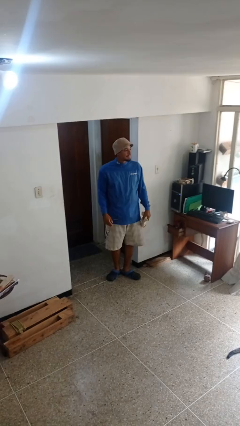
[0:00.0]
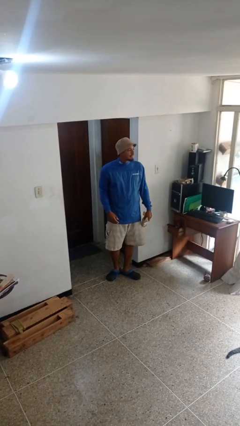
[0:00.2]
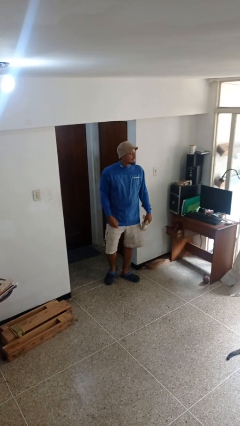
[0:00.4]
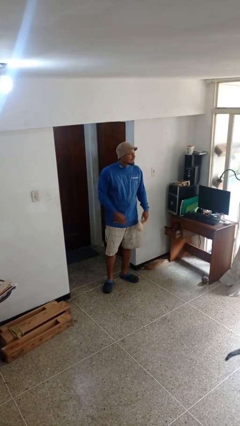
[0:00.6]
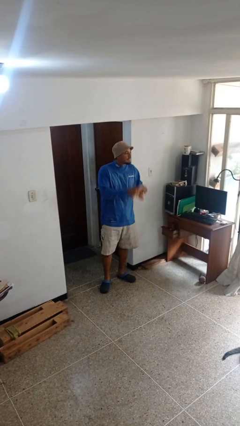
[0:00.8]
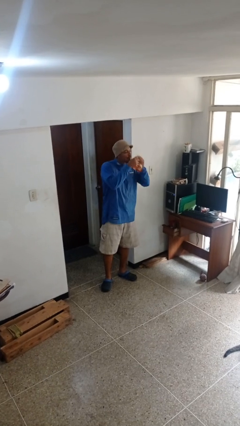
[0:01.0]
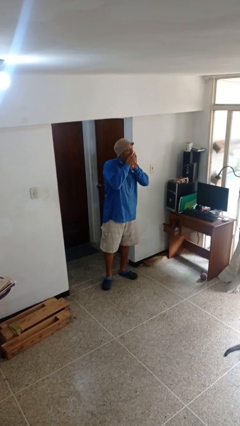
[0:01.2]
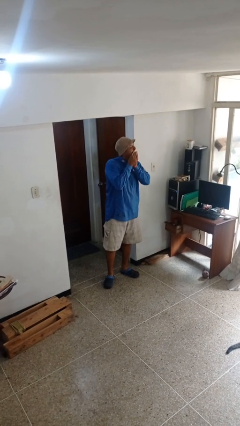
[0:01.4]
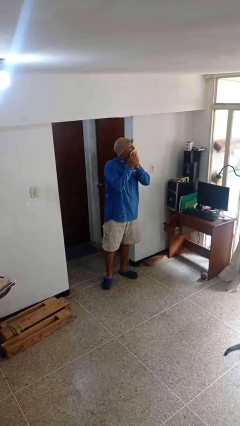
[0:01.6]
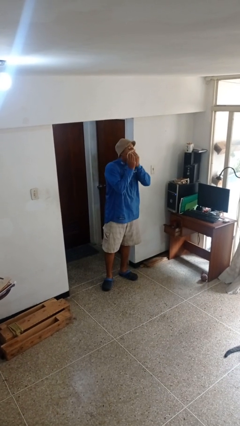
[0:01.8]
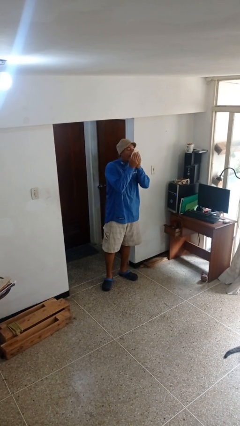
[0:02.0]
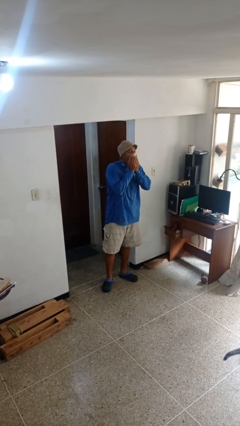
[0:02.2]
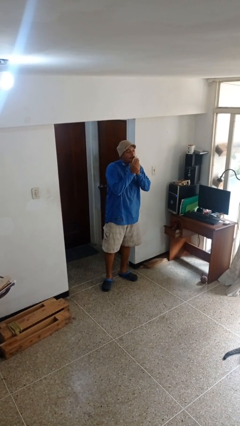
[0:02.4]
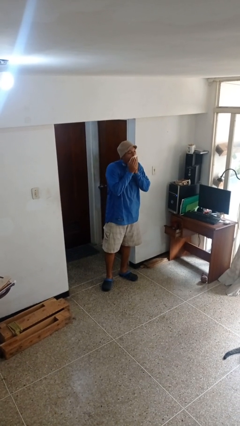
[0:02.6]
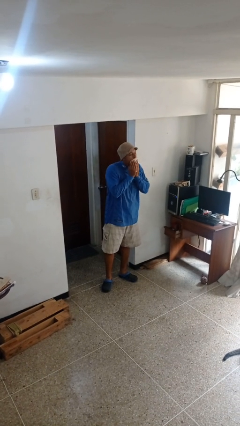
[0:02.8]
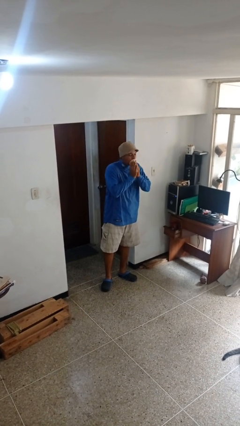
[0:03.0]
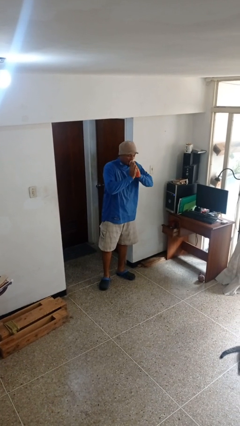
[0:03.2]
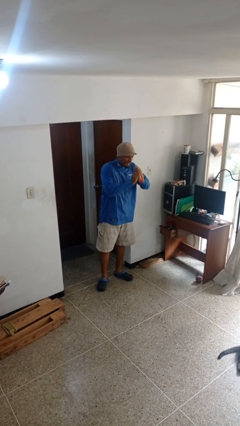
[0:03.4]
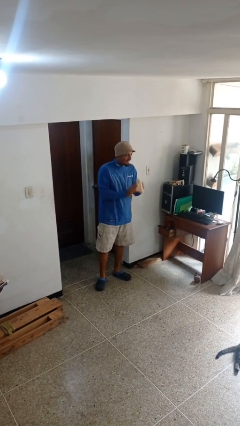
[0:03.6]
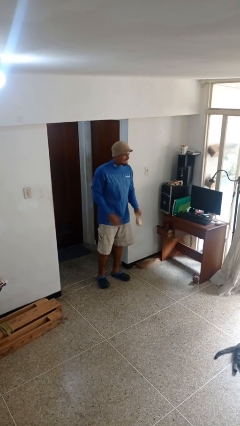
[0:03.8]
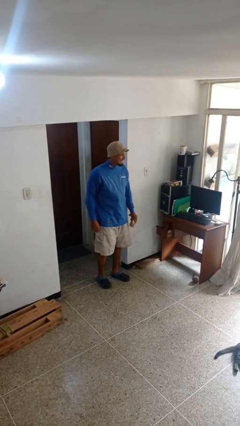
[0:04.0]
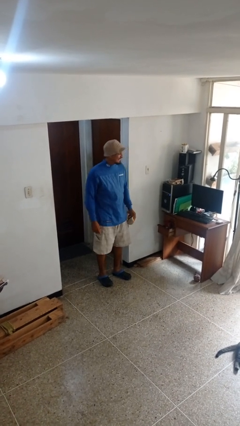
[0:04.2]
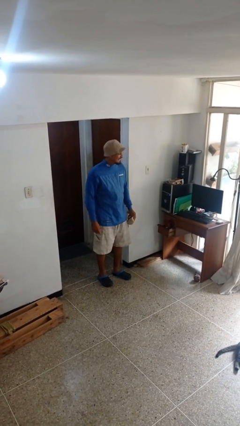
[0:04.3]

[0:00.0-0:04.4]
person wipes mouth with napkin

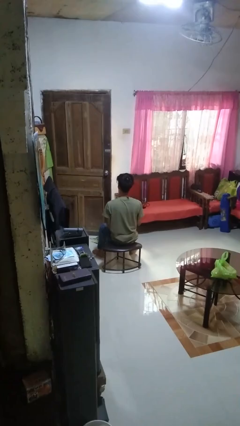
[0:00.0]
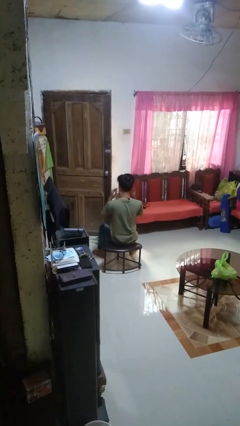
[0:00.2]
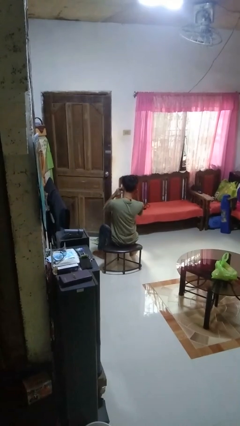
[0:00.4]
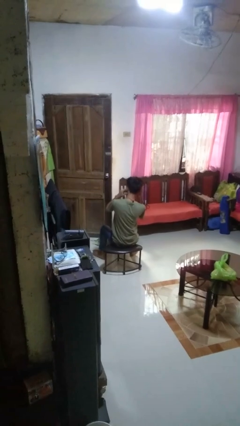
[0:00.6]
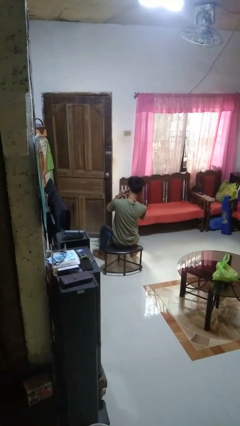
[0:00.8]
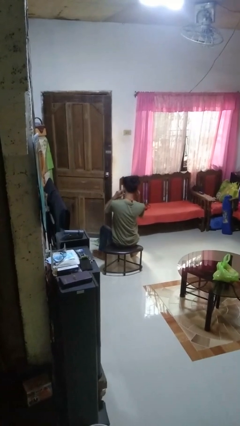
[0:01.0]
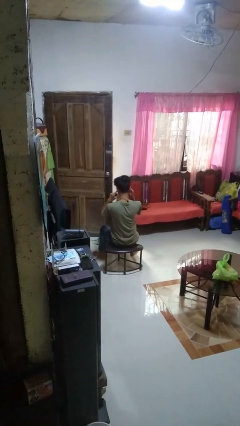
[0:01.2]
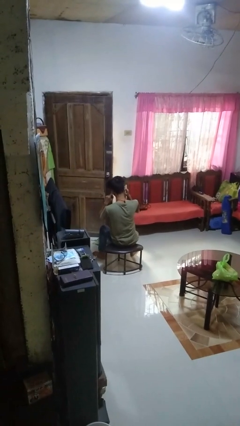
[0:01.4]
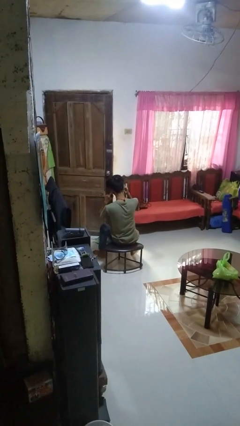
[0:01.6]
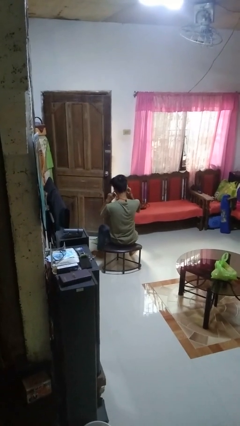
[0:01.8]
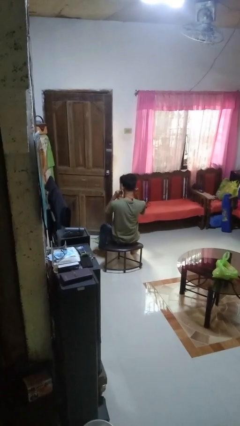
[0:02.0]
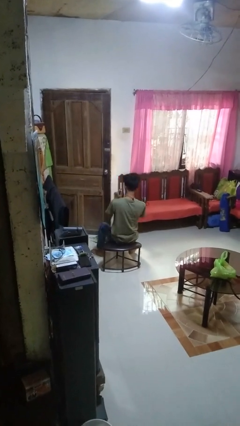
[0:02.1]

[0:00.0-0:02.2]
person puts fingers in ear

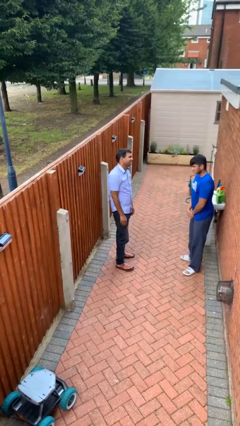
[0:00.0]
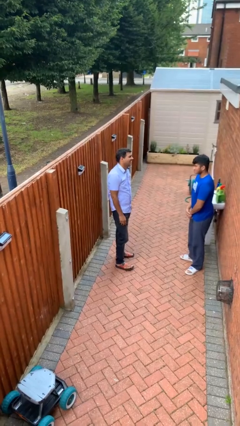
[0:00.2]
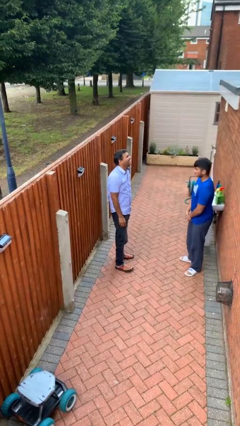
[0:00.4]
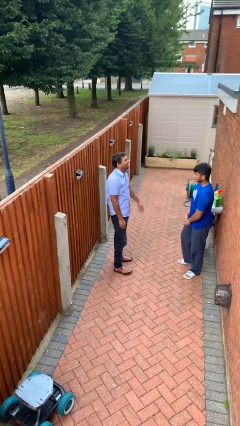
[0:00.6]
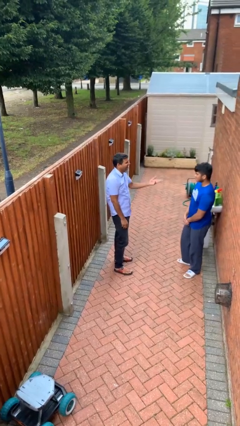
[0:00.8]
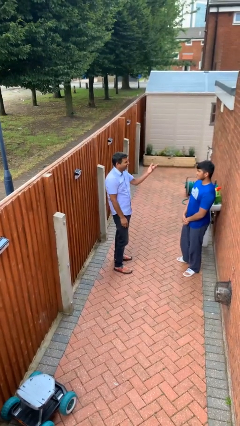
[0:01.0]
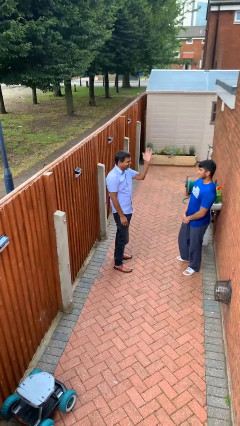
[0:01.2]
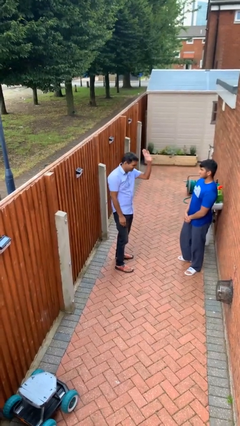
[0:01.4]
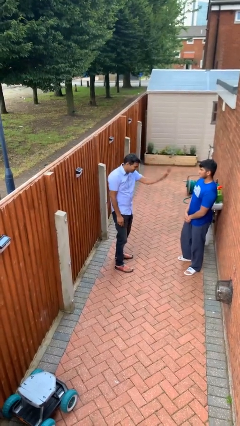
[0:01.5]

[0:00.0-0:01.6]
person laughs with person

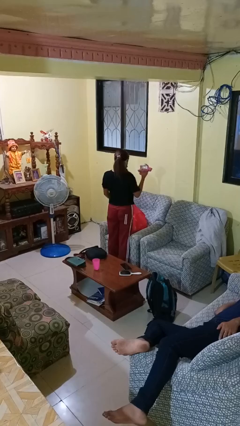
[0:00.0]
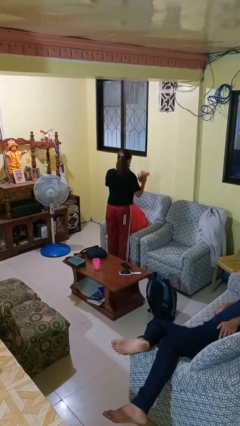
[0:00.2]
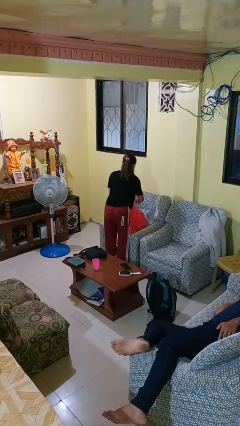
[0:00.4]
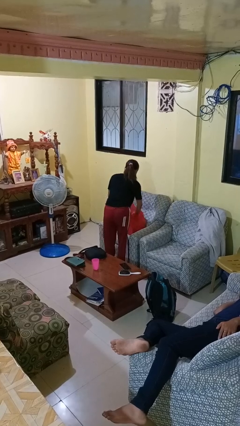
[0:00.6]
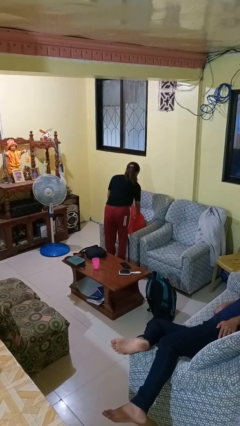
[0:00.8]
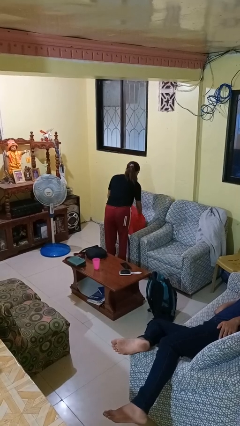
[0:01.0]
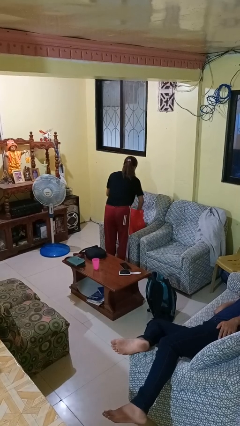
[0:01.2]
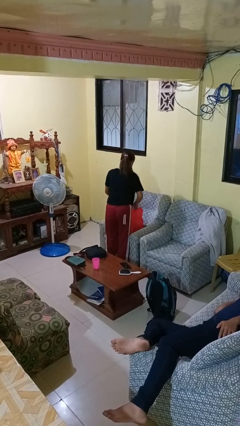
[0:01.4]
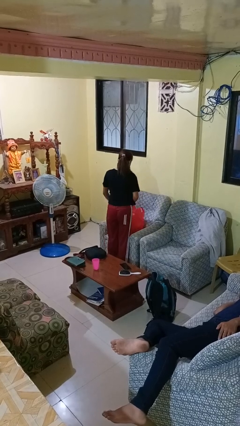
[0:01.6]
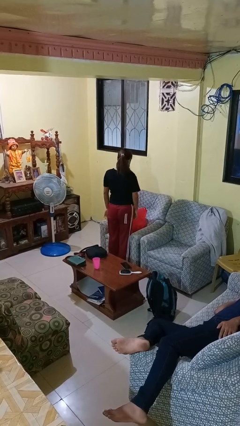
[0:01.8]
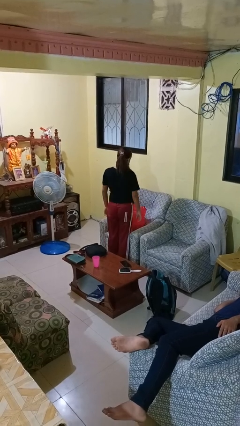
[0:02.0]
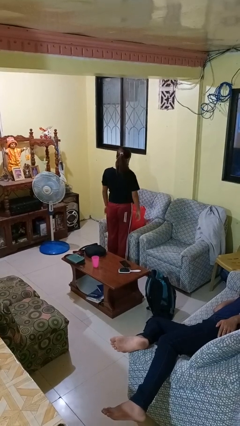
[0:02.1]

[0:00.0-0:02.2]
person puts object into bag

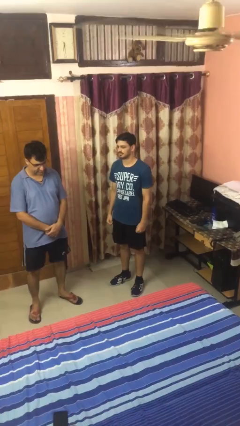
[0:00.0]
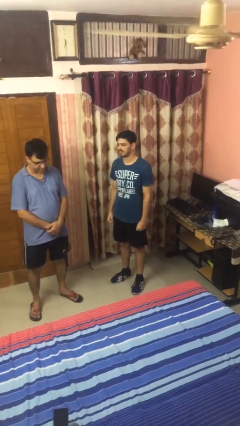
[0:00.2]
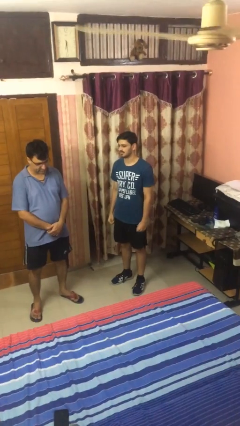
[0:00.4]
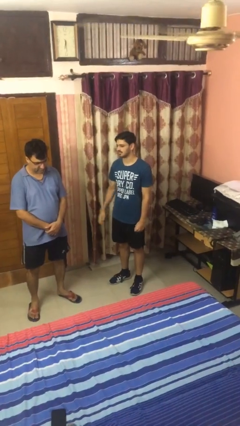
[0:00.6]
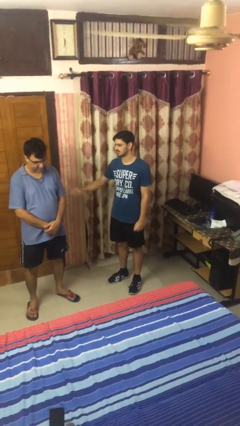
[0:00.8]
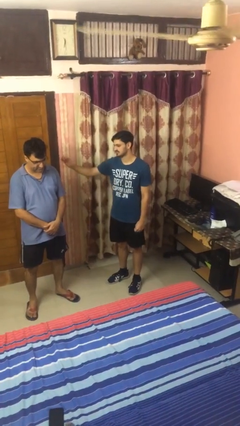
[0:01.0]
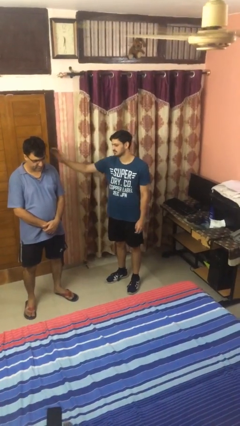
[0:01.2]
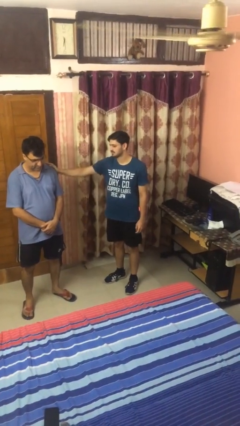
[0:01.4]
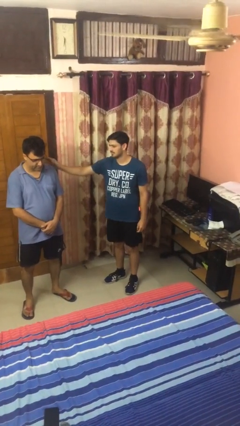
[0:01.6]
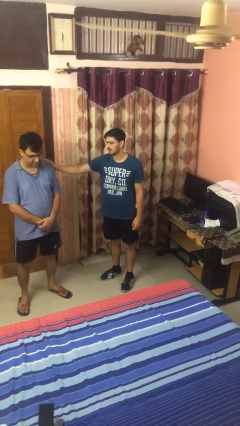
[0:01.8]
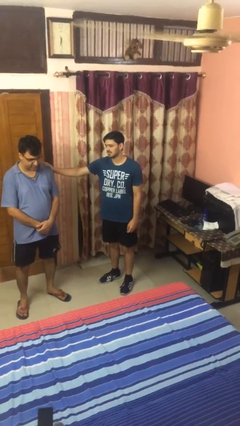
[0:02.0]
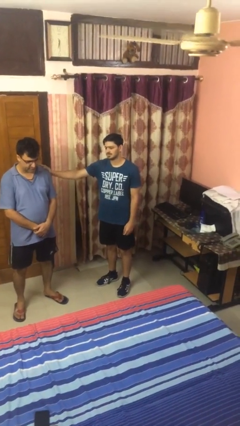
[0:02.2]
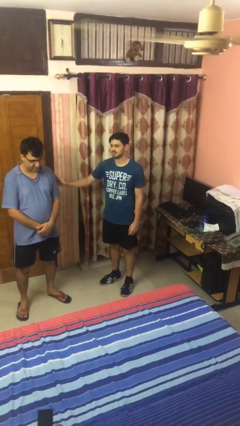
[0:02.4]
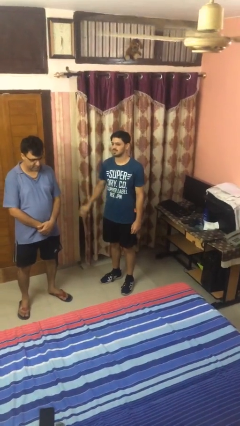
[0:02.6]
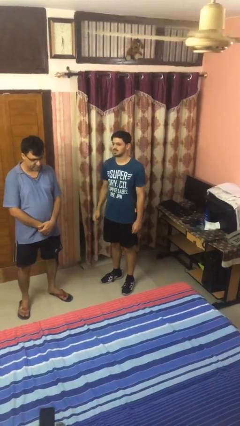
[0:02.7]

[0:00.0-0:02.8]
person pounds shoulders of person

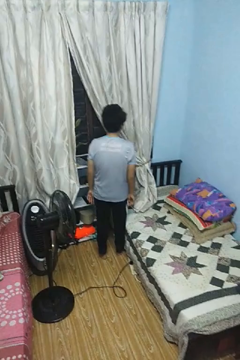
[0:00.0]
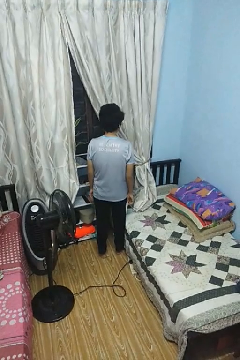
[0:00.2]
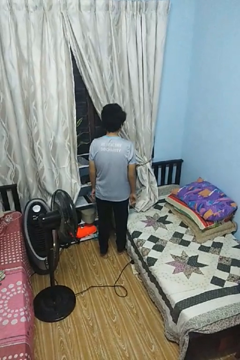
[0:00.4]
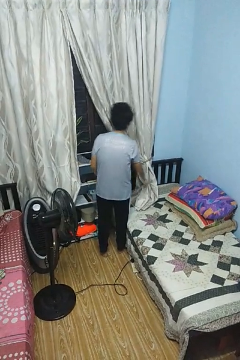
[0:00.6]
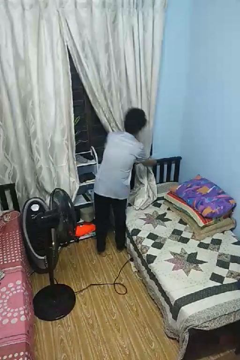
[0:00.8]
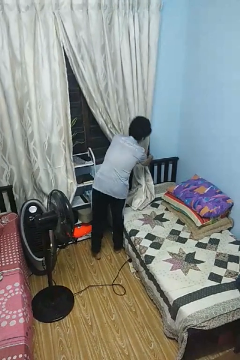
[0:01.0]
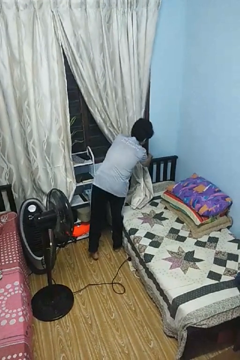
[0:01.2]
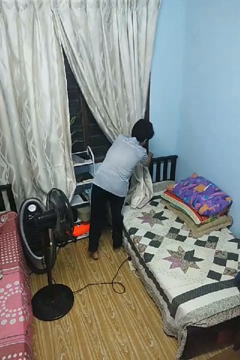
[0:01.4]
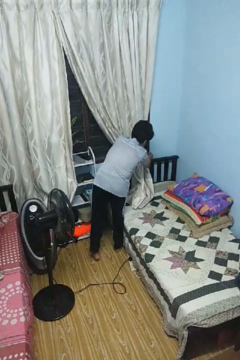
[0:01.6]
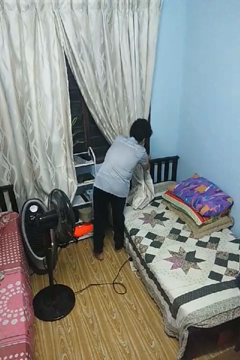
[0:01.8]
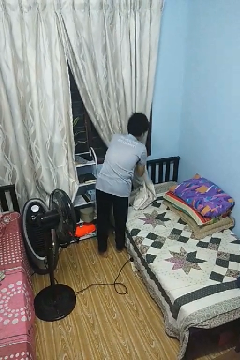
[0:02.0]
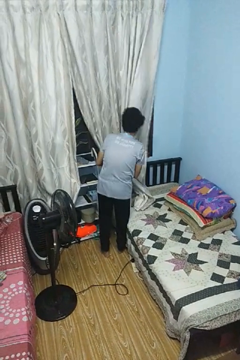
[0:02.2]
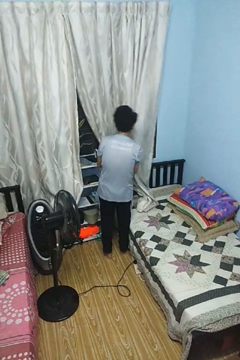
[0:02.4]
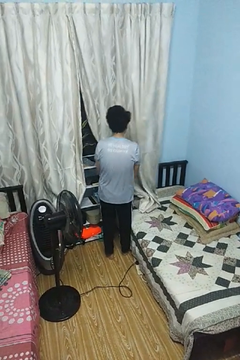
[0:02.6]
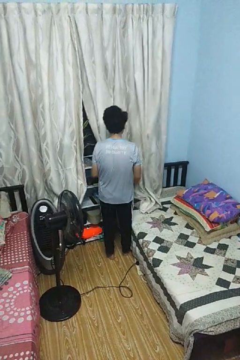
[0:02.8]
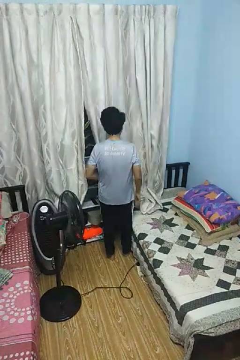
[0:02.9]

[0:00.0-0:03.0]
person closes curtains

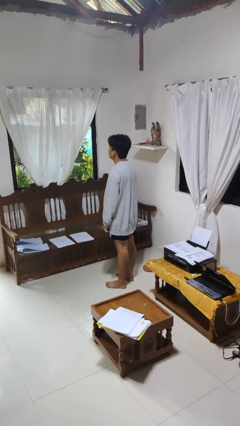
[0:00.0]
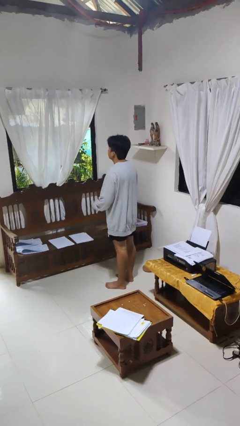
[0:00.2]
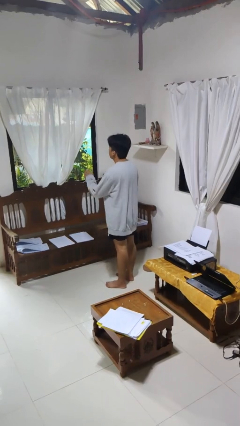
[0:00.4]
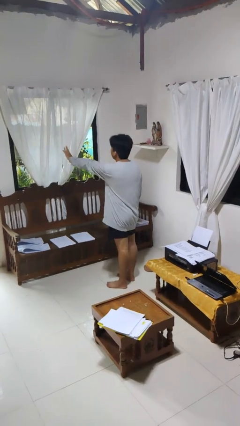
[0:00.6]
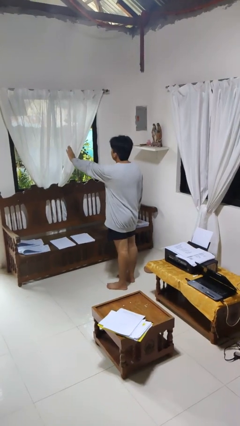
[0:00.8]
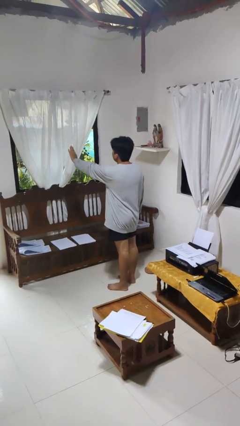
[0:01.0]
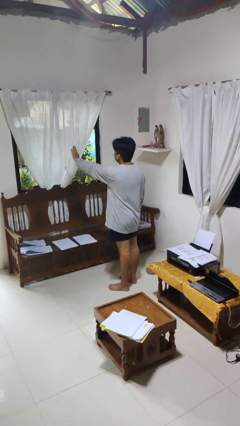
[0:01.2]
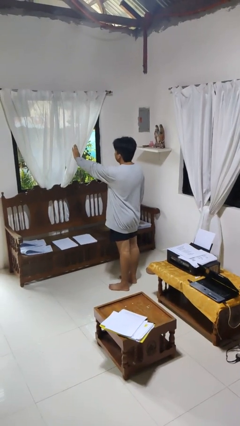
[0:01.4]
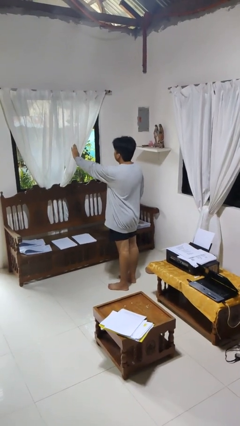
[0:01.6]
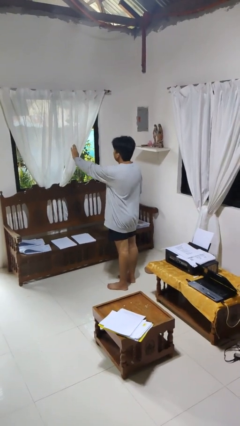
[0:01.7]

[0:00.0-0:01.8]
person gestures stop
